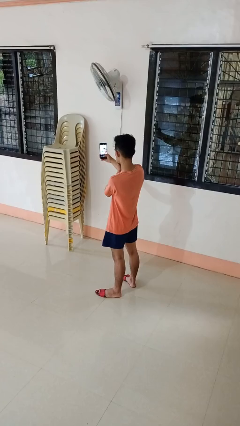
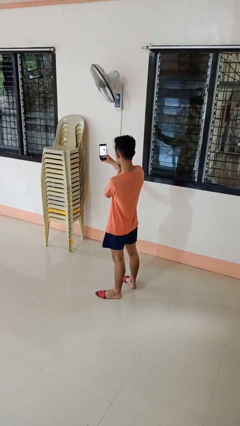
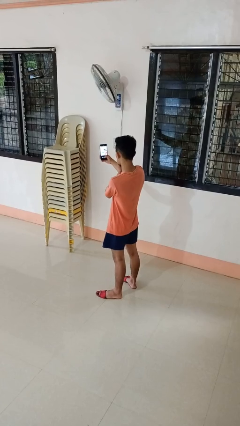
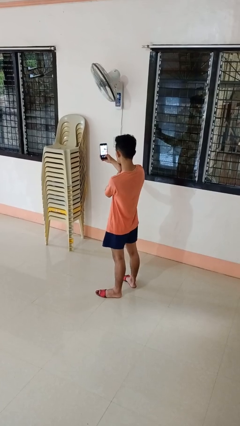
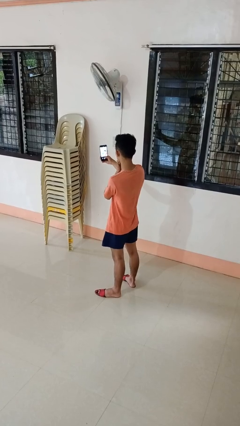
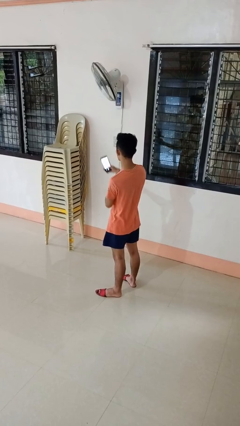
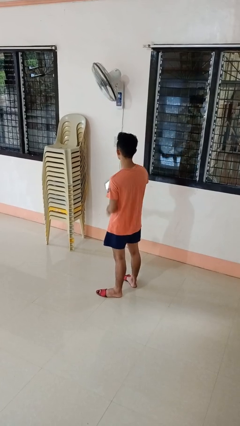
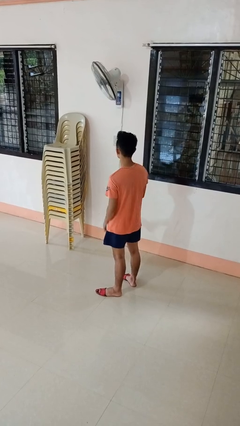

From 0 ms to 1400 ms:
person takes selfie

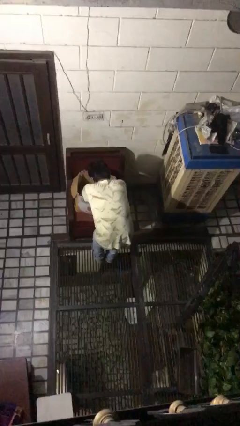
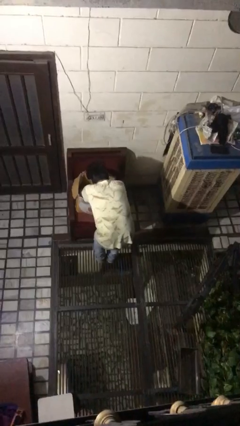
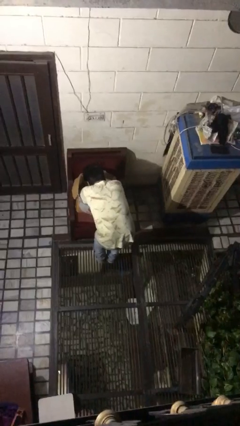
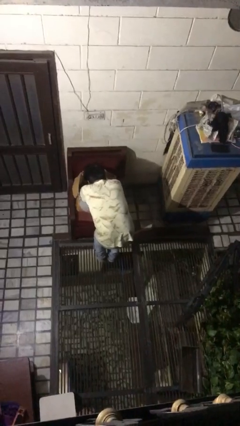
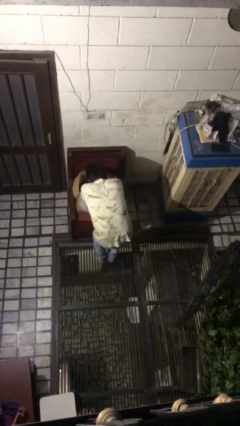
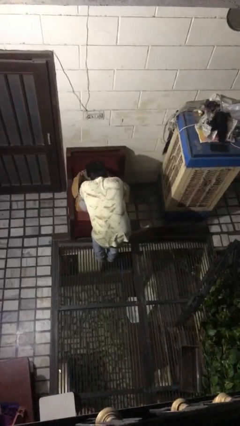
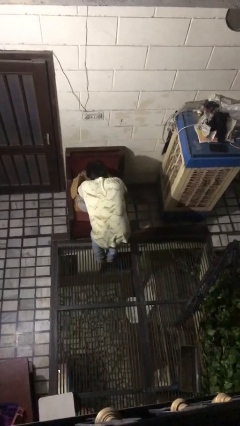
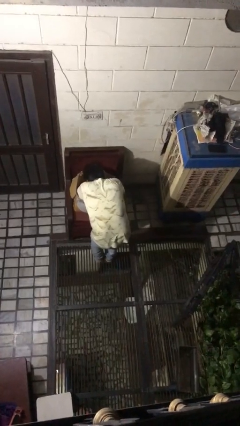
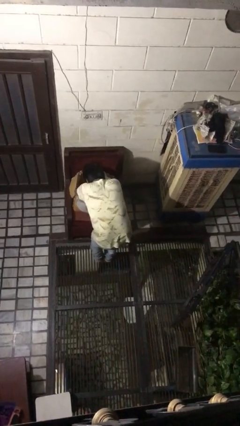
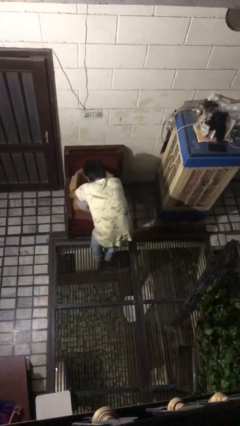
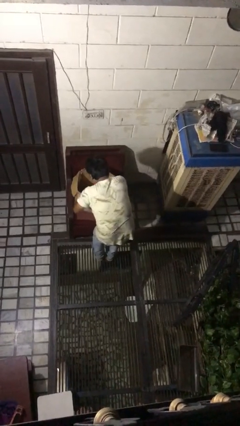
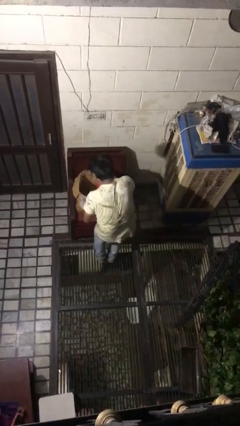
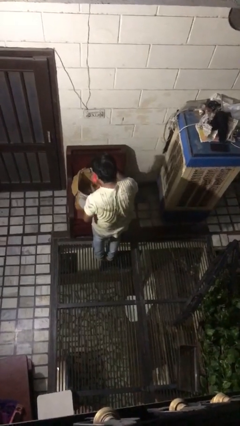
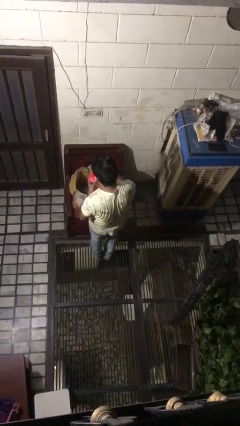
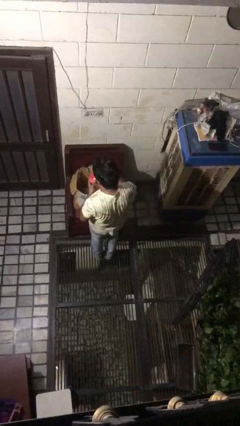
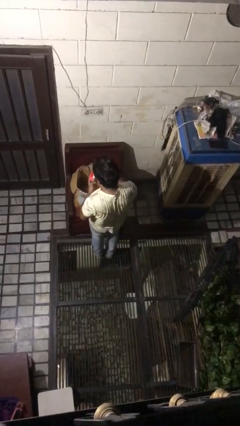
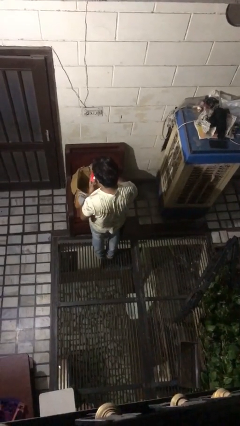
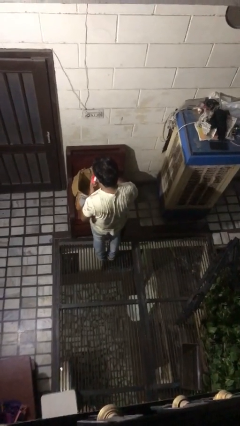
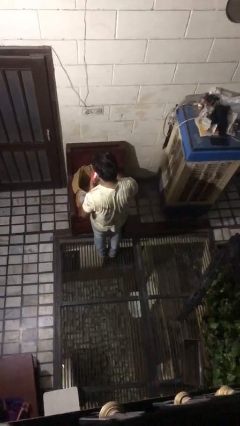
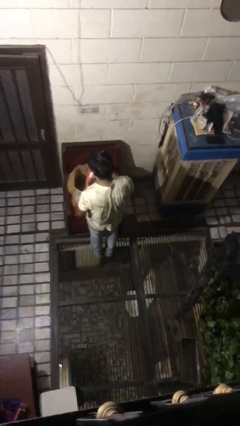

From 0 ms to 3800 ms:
person searches in box

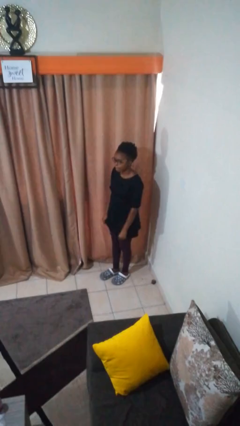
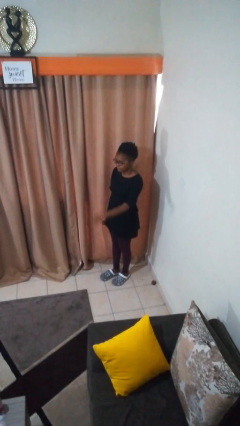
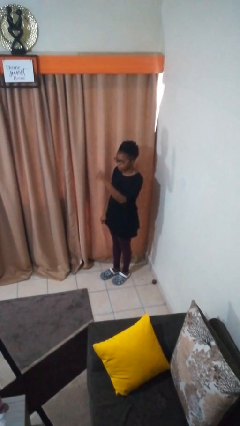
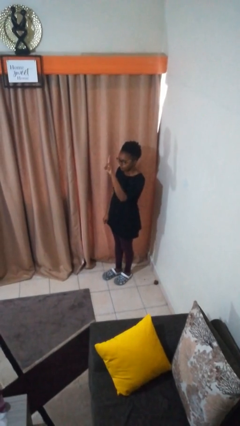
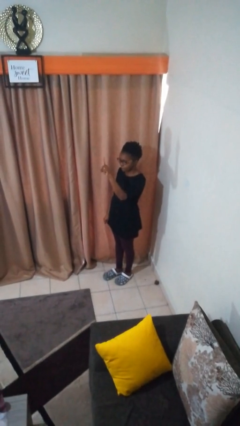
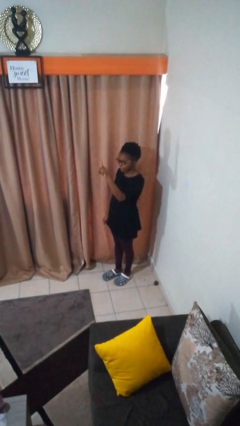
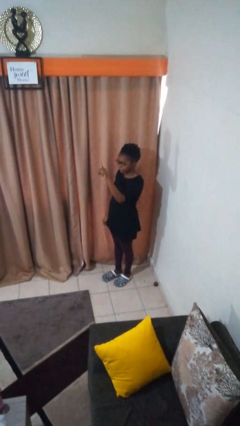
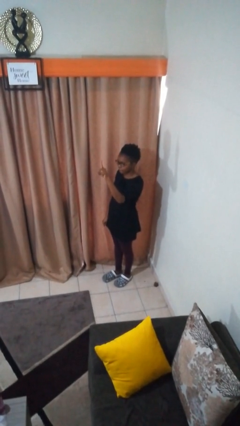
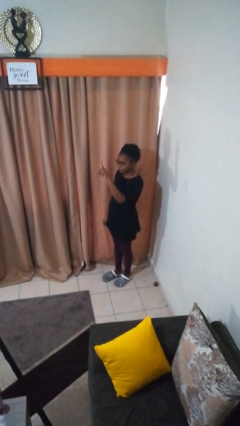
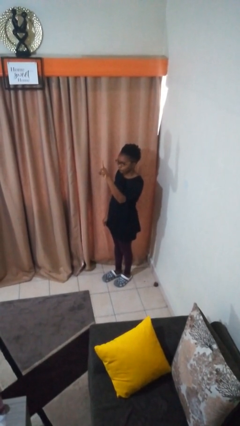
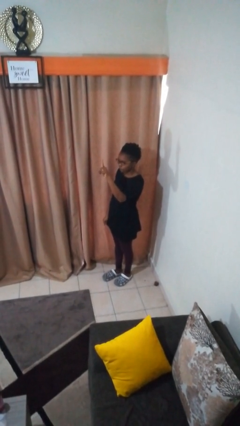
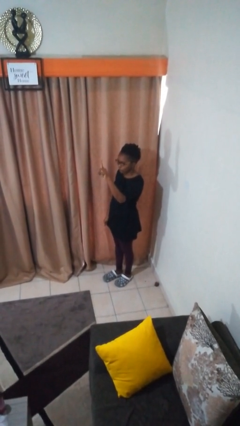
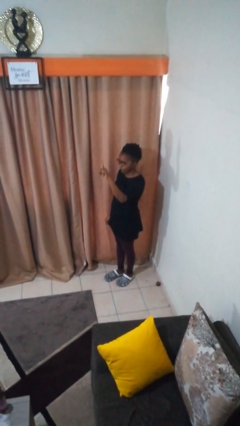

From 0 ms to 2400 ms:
person gestures number one

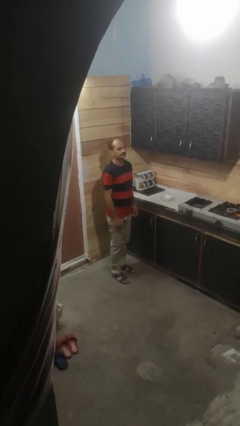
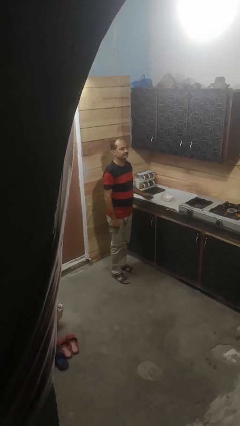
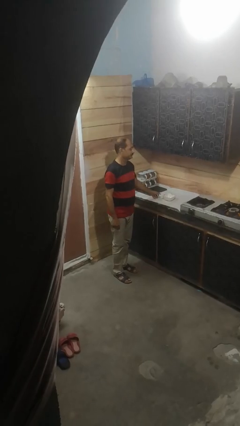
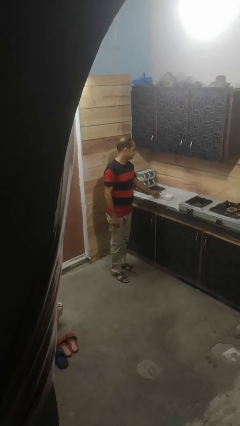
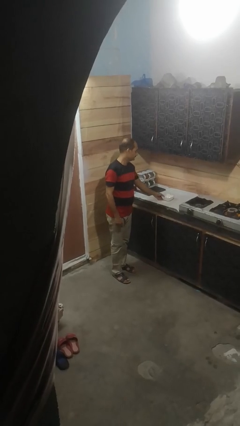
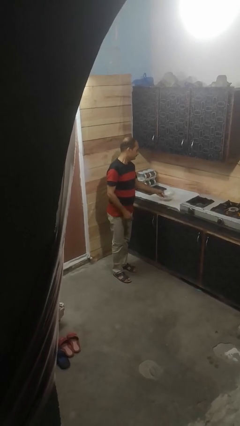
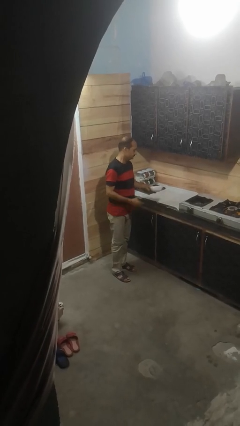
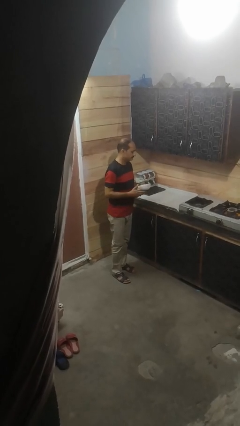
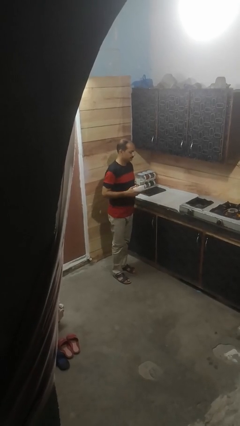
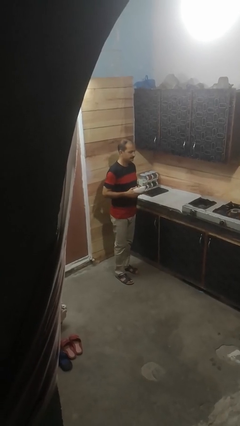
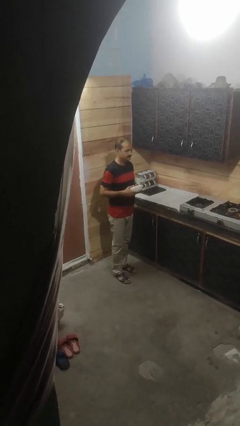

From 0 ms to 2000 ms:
person picks up object from countertop

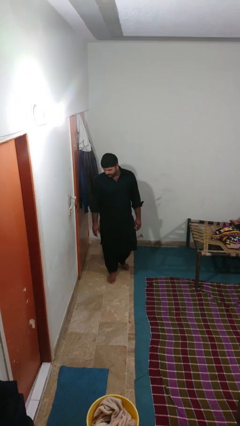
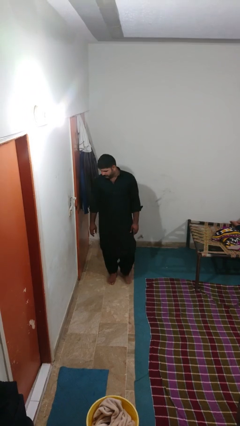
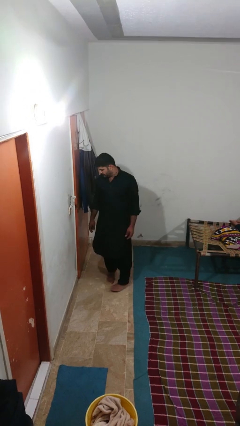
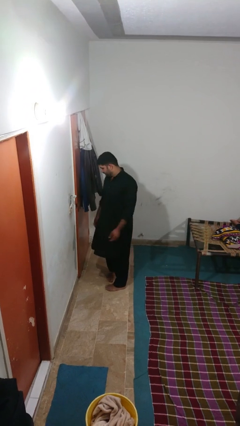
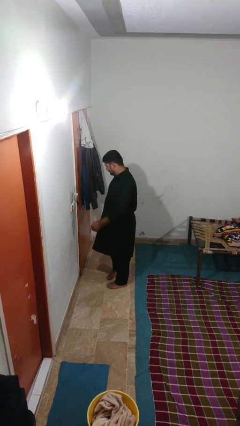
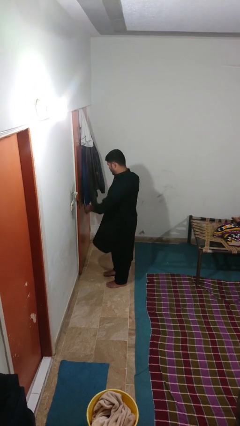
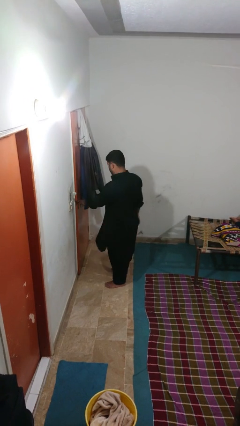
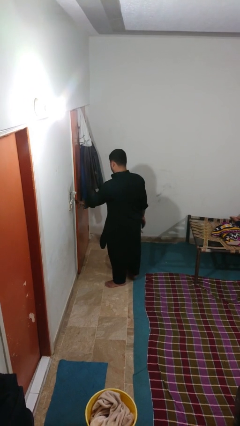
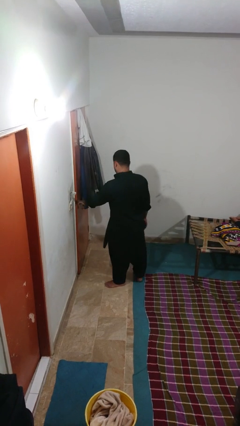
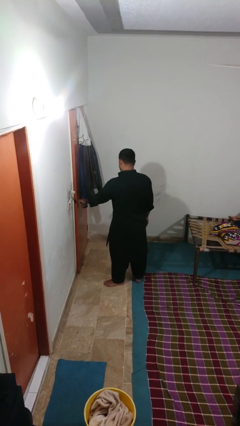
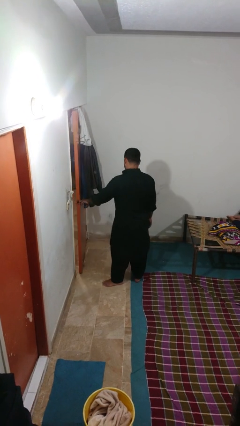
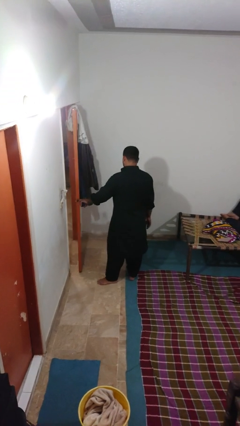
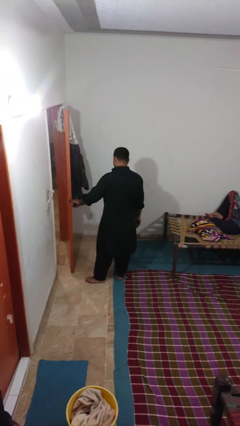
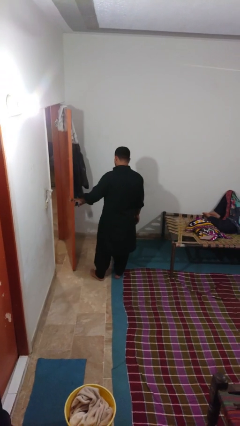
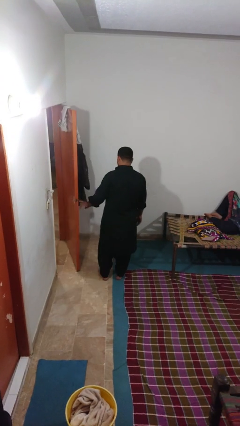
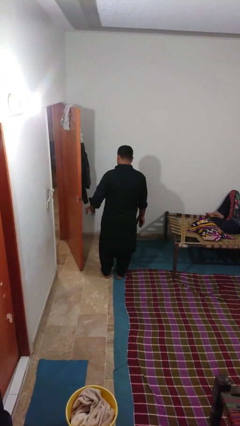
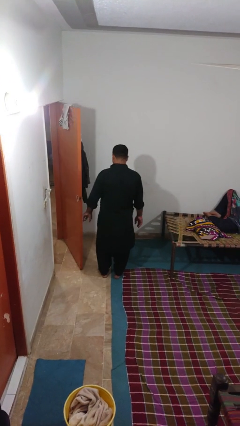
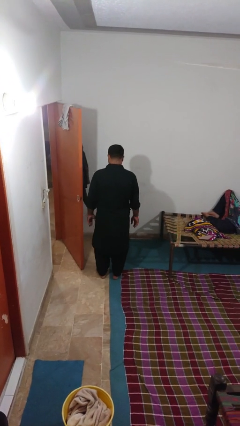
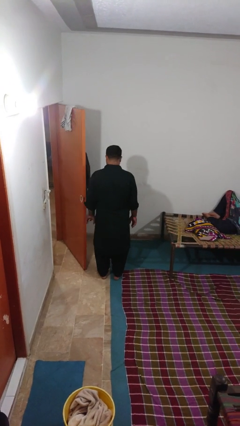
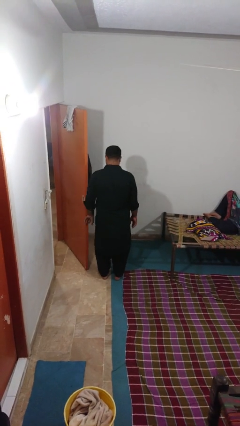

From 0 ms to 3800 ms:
person opens facility door

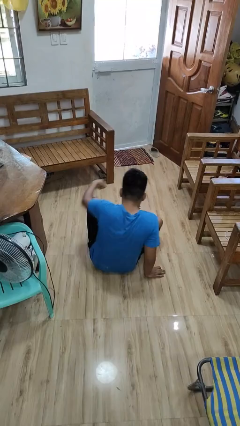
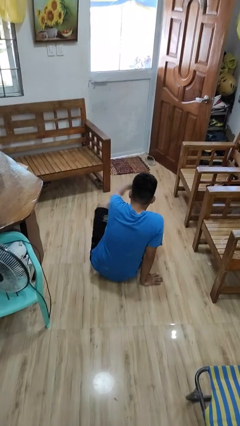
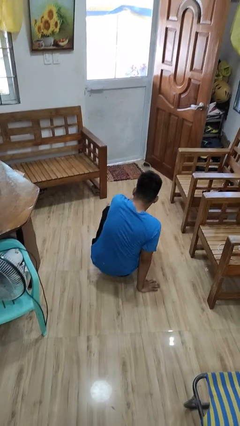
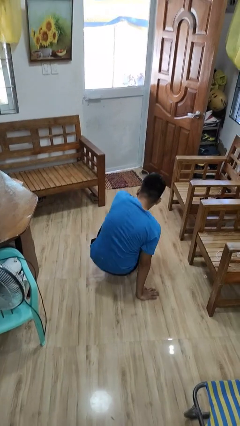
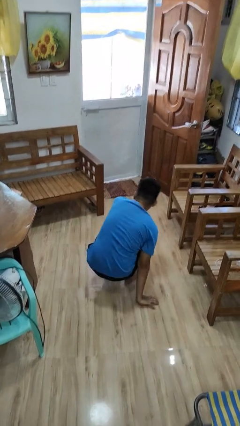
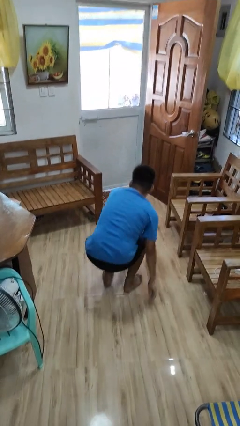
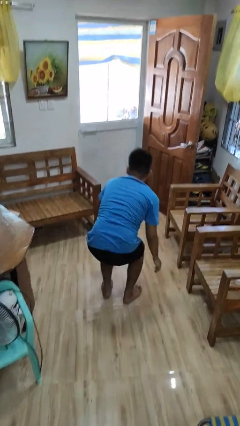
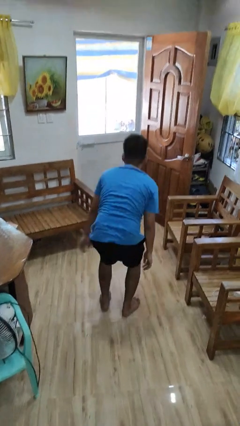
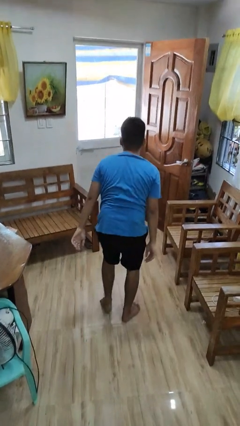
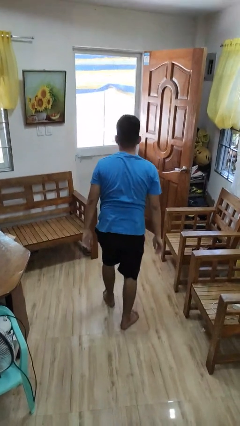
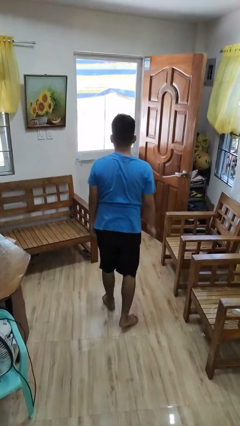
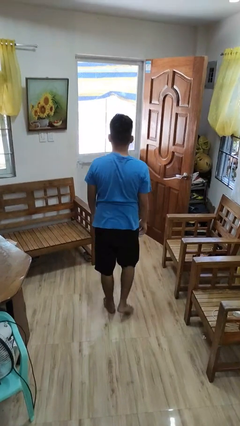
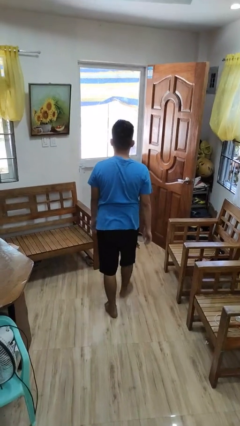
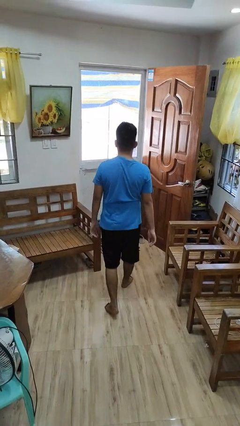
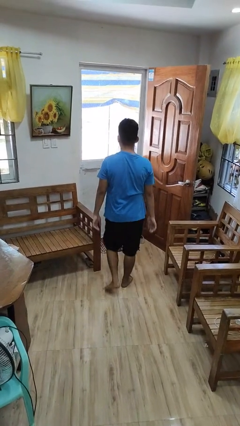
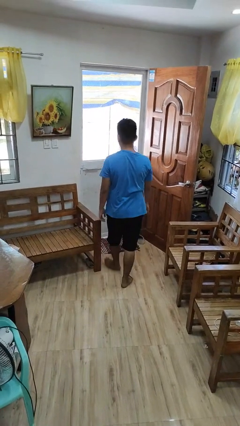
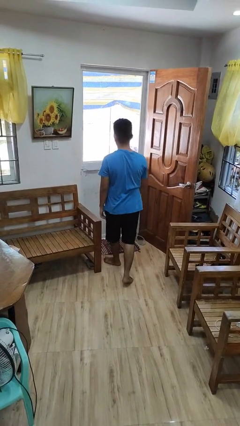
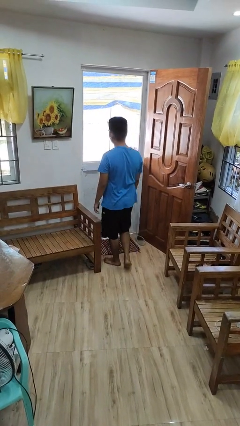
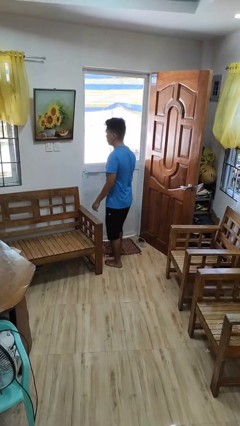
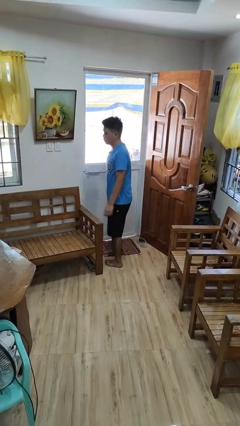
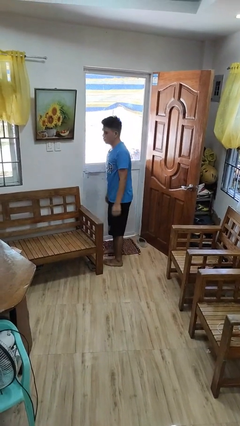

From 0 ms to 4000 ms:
person stands up from floor
